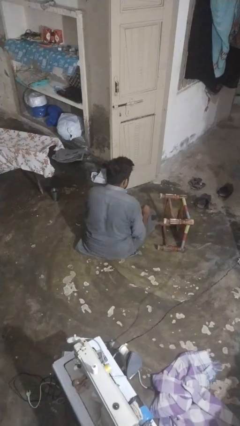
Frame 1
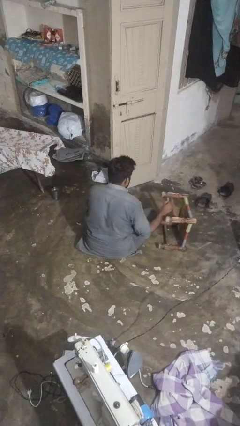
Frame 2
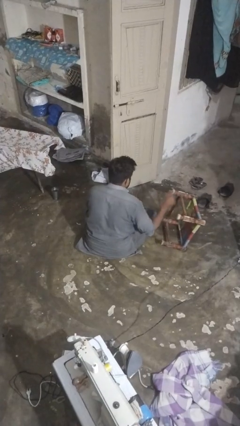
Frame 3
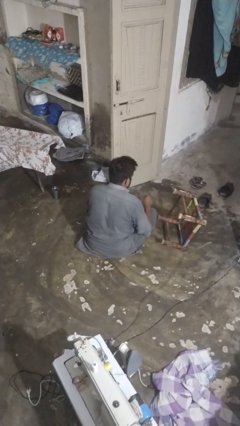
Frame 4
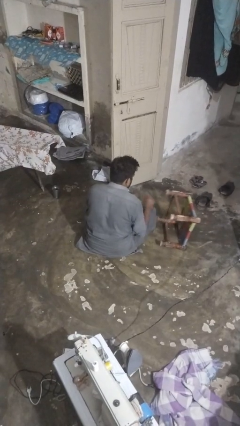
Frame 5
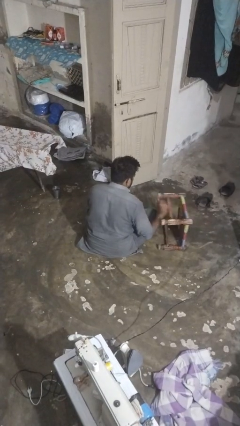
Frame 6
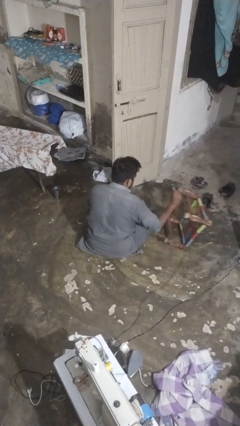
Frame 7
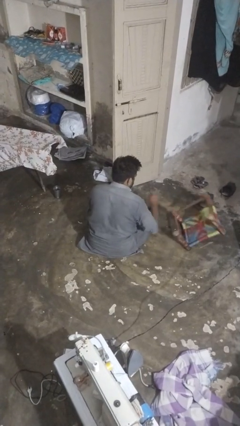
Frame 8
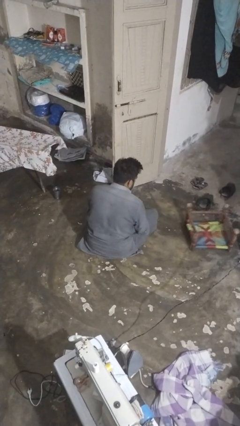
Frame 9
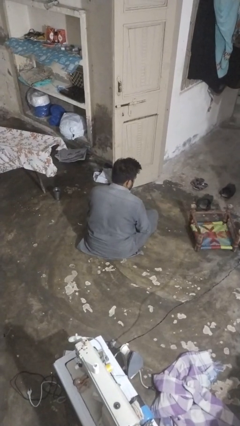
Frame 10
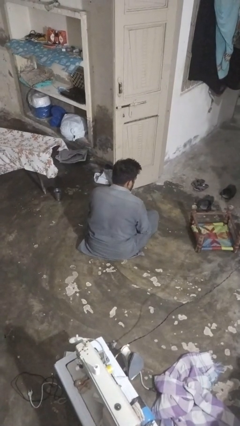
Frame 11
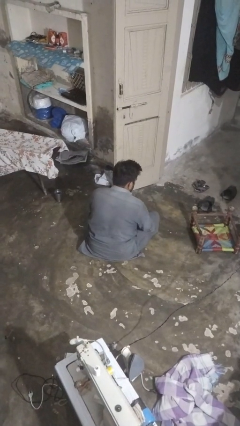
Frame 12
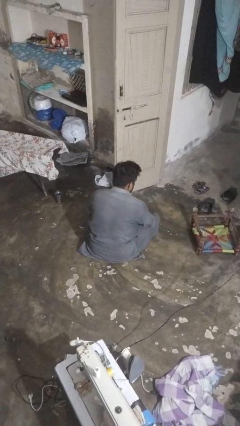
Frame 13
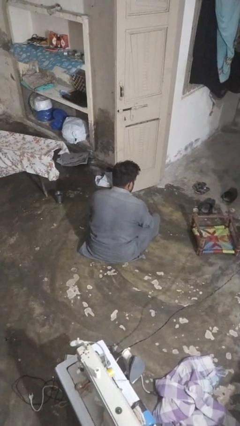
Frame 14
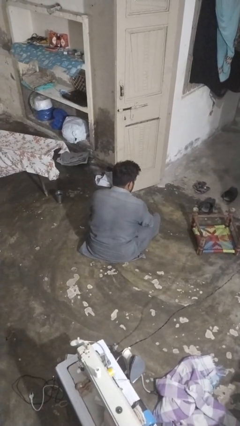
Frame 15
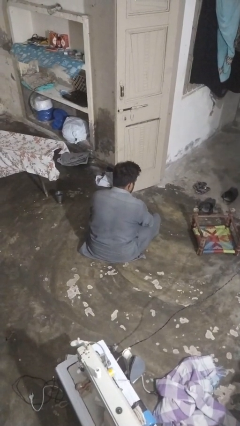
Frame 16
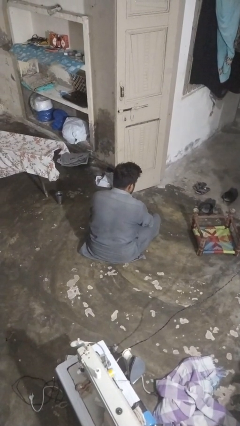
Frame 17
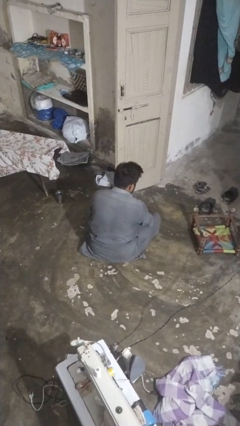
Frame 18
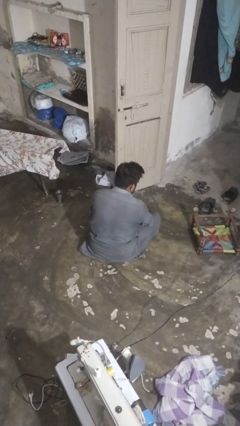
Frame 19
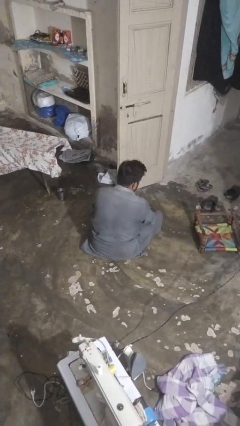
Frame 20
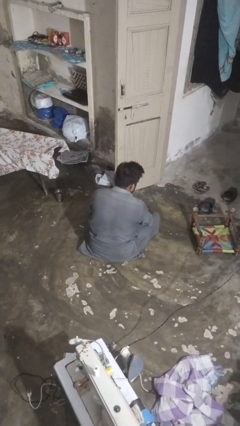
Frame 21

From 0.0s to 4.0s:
person knocks over furniture

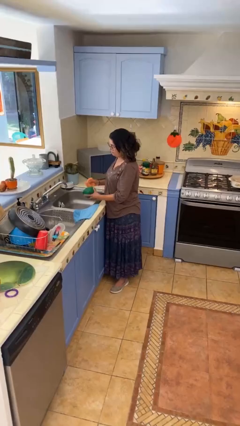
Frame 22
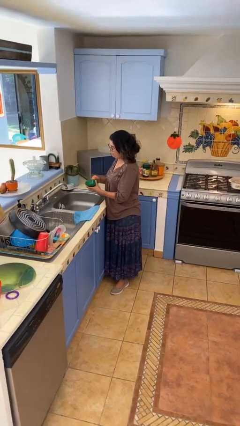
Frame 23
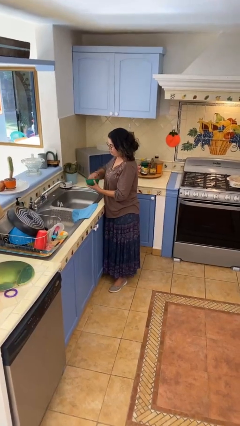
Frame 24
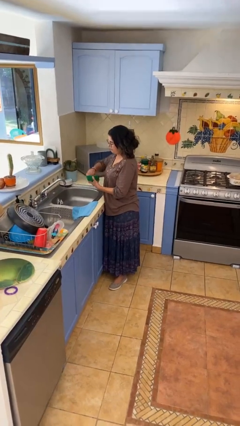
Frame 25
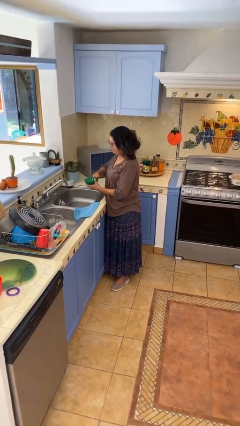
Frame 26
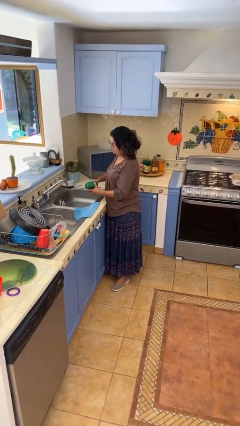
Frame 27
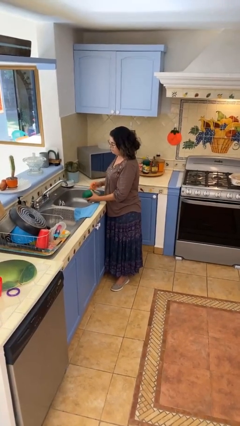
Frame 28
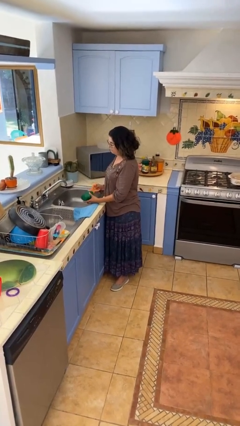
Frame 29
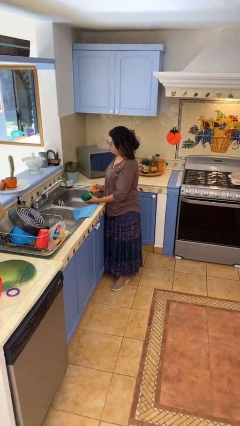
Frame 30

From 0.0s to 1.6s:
person washes dish

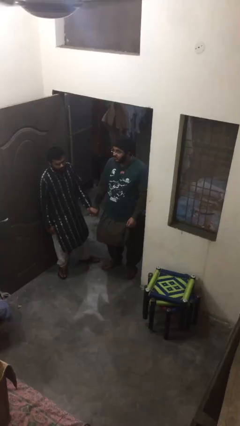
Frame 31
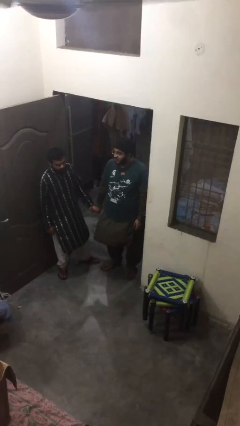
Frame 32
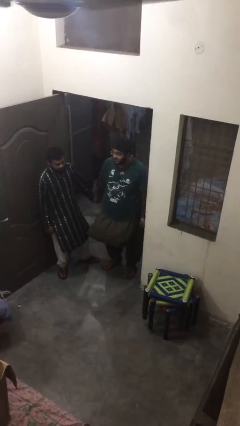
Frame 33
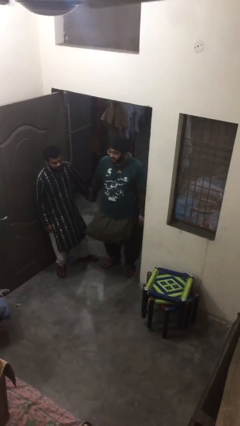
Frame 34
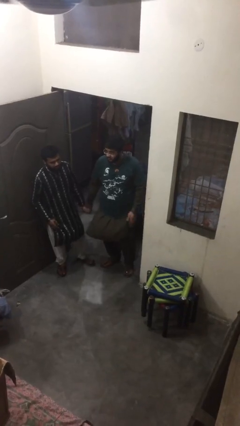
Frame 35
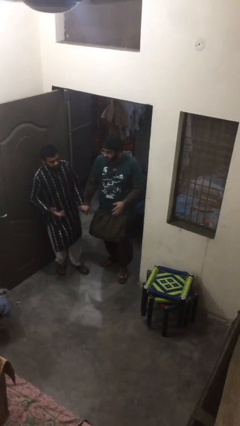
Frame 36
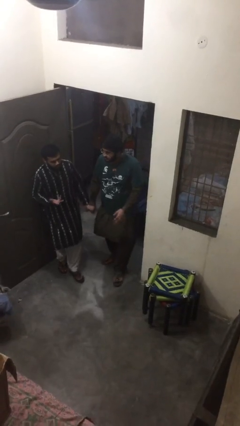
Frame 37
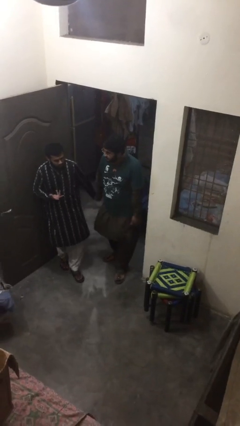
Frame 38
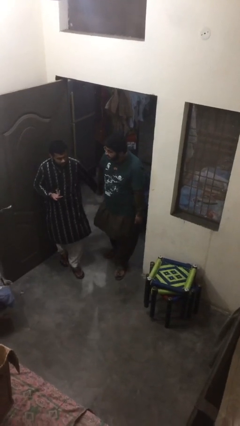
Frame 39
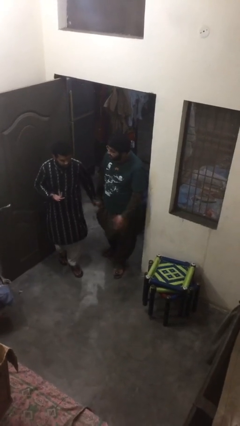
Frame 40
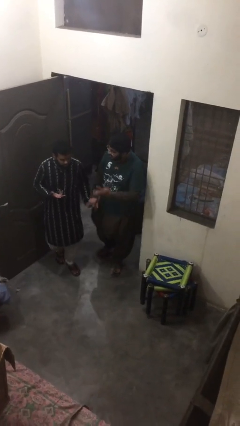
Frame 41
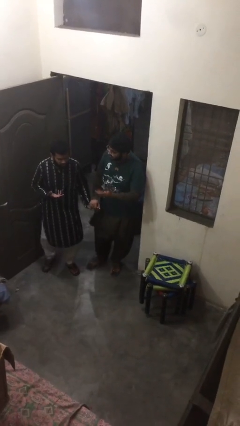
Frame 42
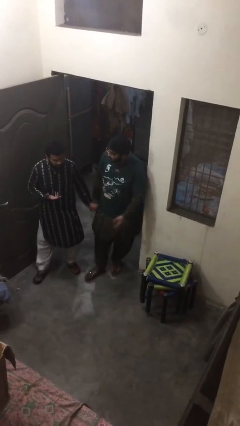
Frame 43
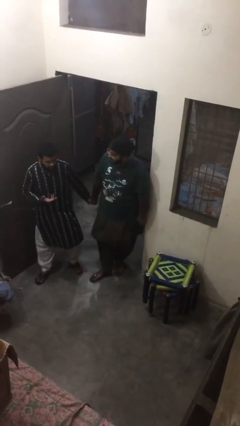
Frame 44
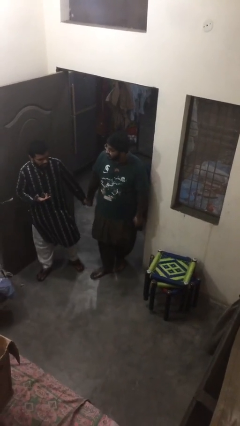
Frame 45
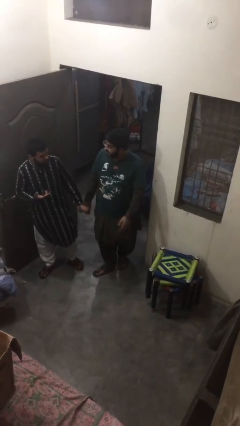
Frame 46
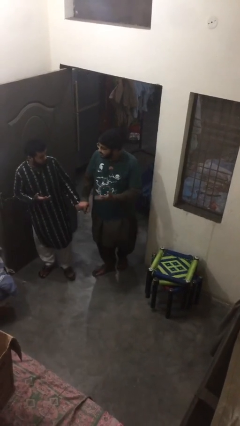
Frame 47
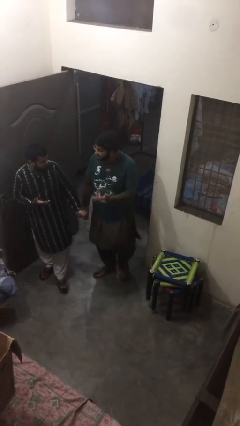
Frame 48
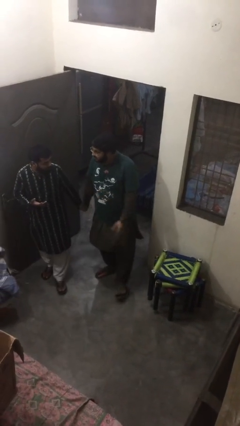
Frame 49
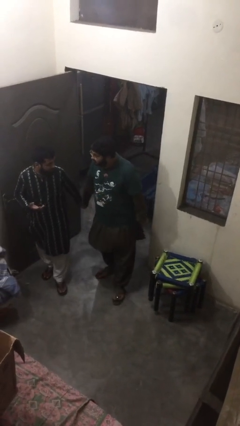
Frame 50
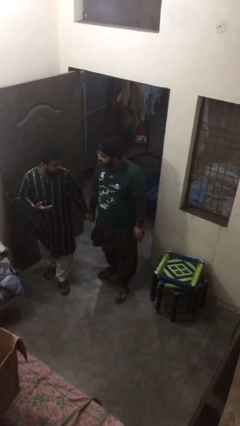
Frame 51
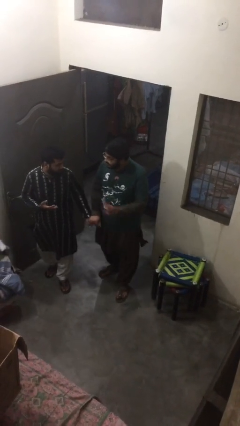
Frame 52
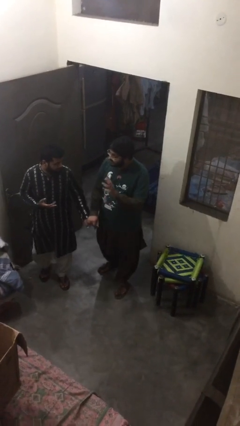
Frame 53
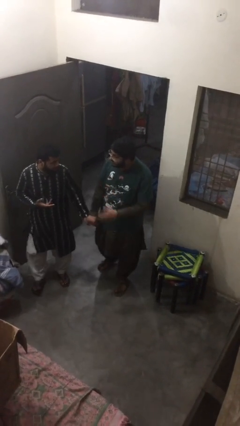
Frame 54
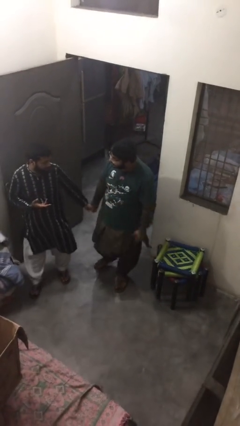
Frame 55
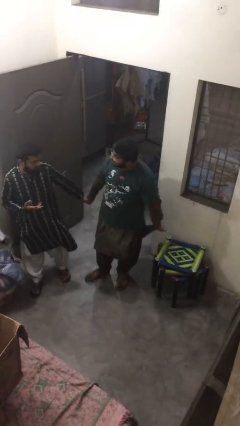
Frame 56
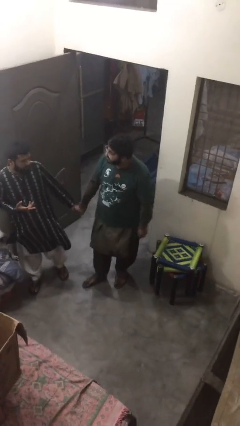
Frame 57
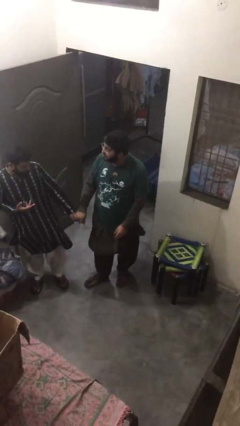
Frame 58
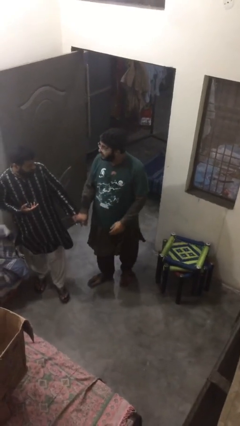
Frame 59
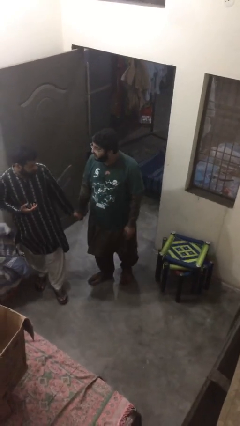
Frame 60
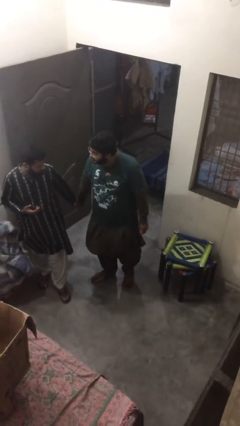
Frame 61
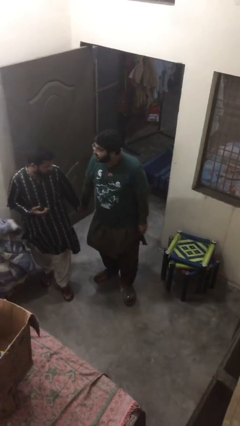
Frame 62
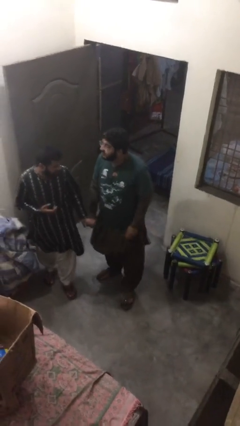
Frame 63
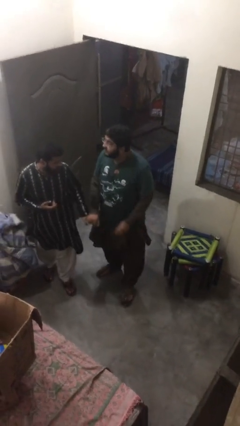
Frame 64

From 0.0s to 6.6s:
person holds hand

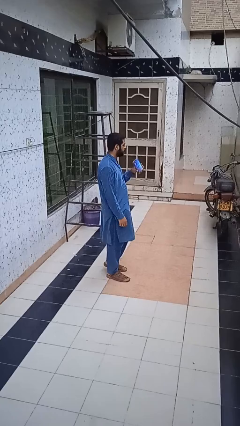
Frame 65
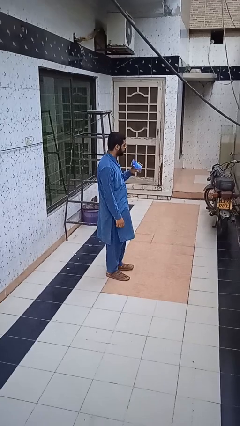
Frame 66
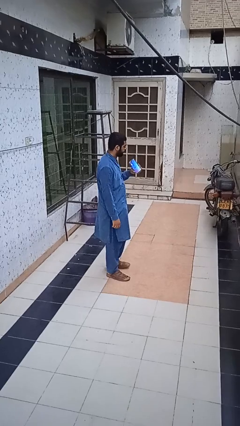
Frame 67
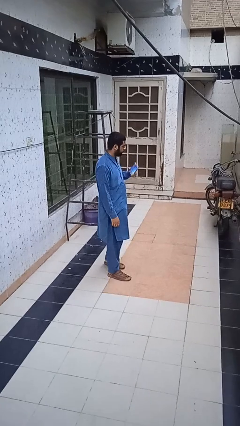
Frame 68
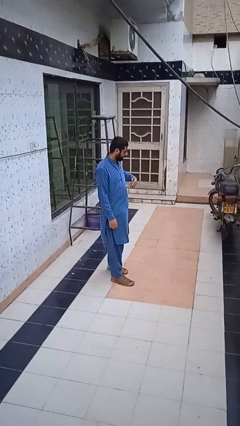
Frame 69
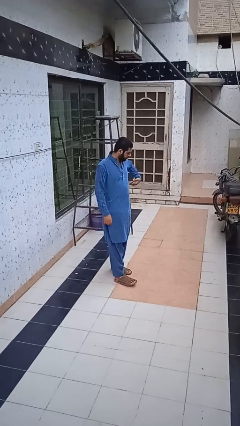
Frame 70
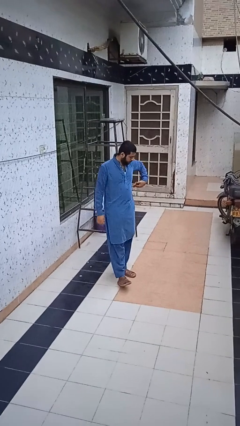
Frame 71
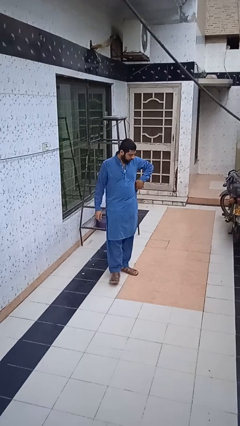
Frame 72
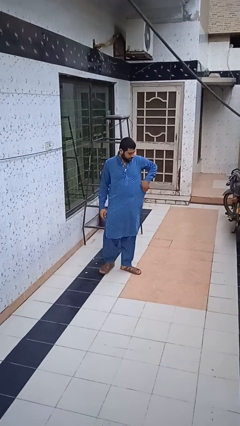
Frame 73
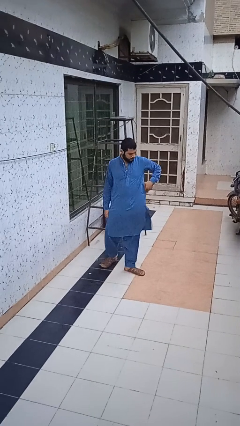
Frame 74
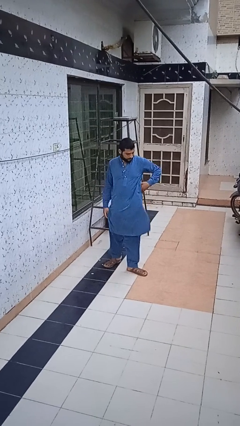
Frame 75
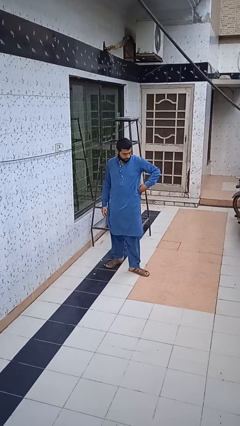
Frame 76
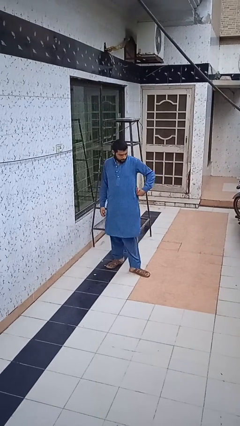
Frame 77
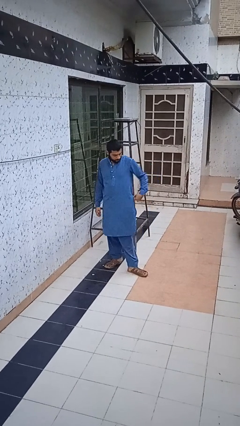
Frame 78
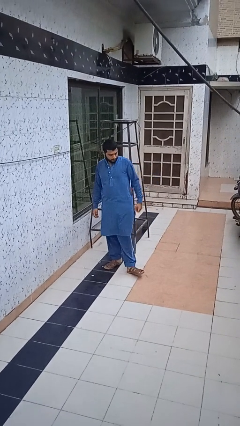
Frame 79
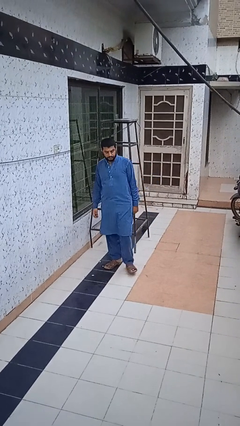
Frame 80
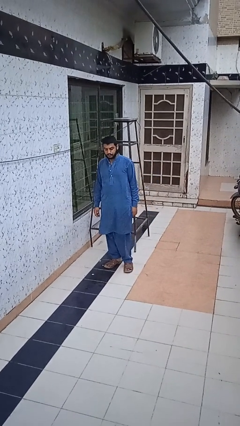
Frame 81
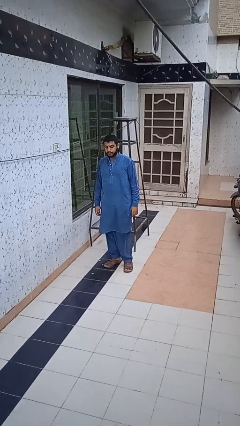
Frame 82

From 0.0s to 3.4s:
person puts phone into pocket

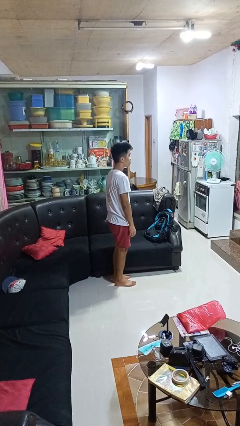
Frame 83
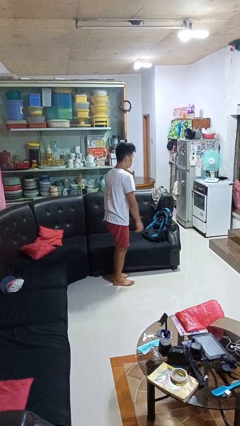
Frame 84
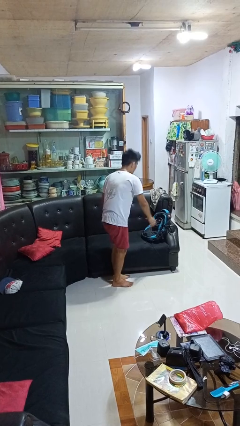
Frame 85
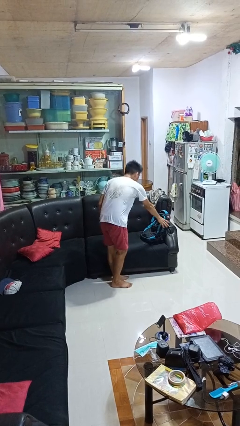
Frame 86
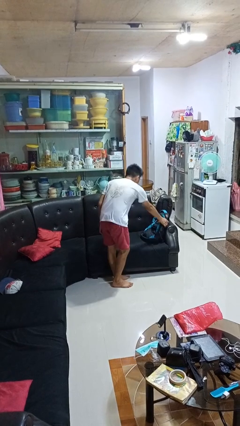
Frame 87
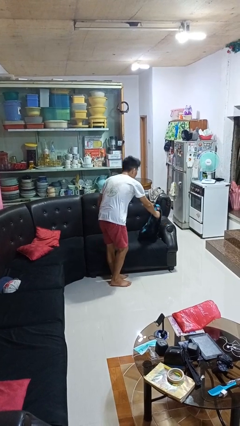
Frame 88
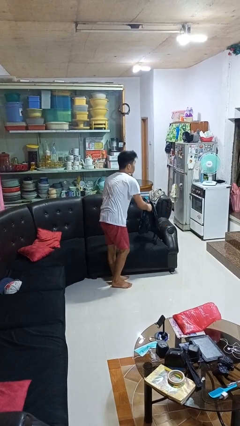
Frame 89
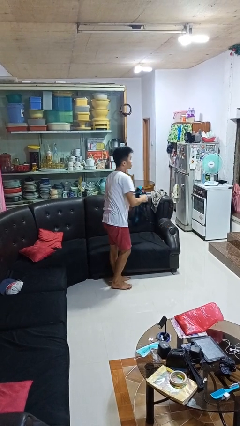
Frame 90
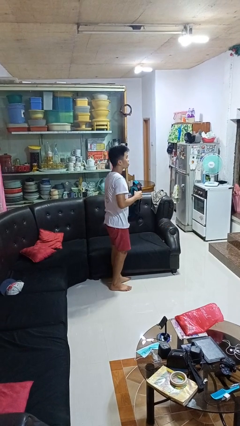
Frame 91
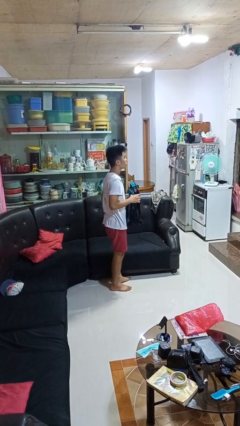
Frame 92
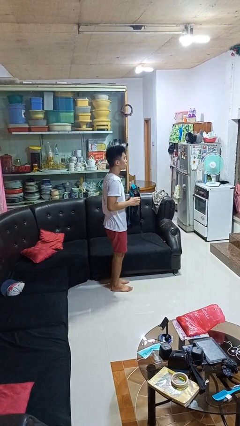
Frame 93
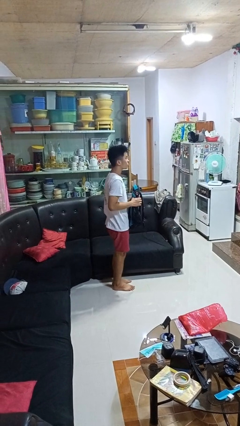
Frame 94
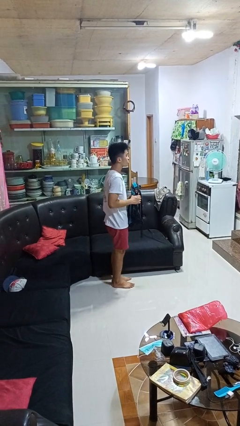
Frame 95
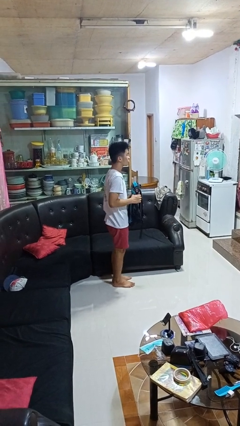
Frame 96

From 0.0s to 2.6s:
person picks up object from couch
